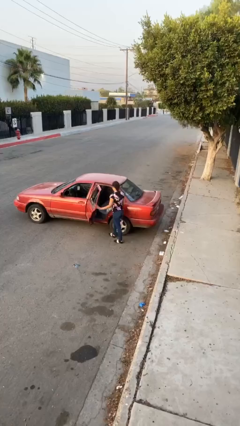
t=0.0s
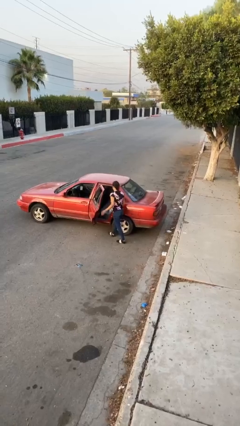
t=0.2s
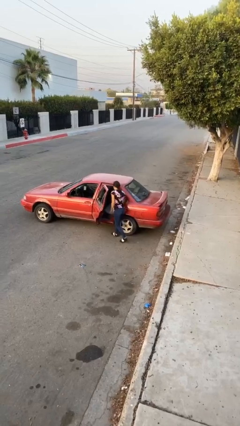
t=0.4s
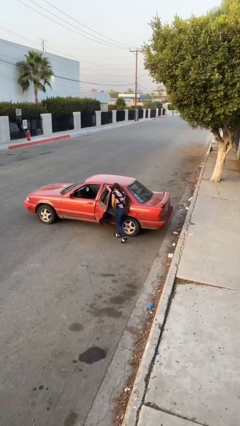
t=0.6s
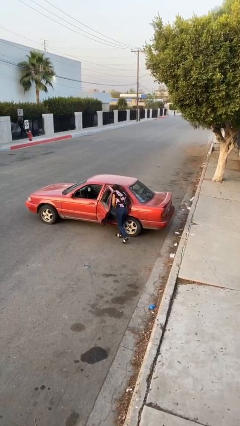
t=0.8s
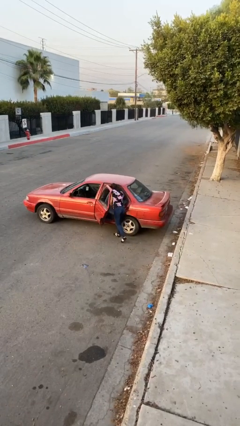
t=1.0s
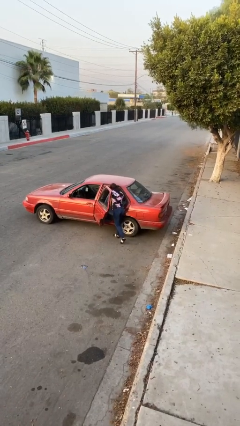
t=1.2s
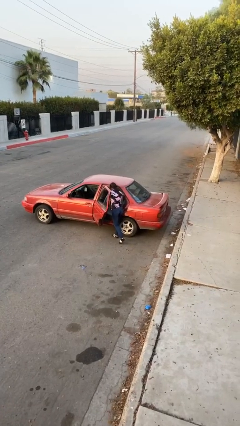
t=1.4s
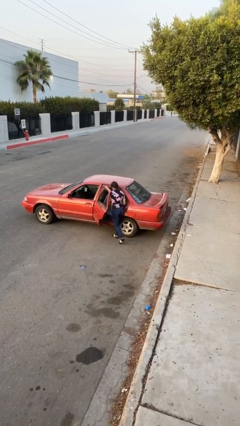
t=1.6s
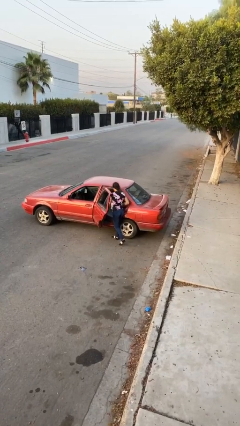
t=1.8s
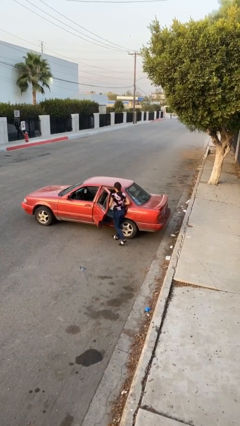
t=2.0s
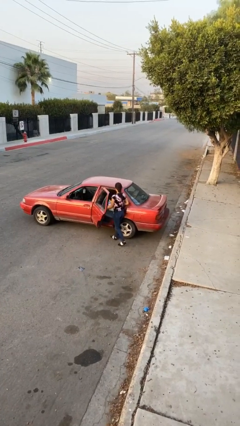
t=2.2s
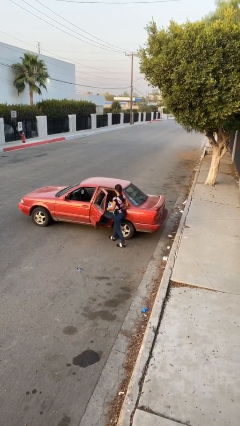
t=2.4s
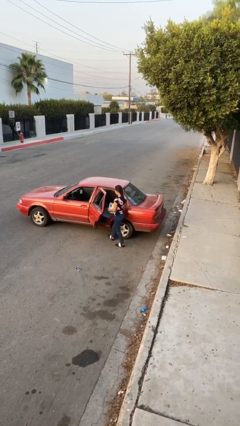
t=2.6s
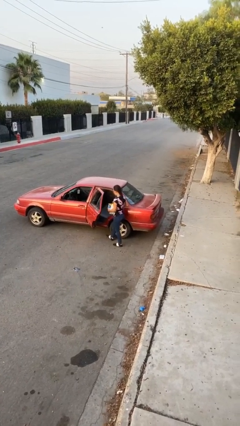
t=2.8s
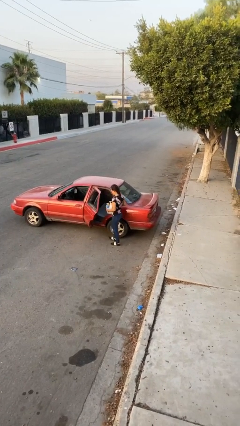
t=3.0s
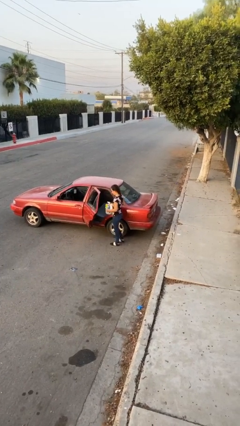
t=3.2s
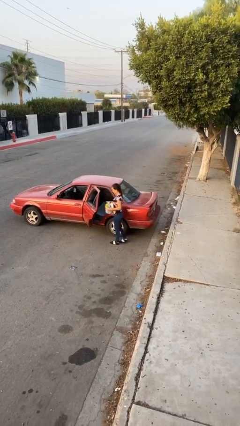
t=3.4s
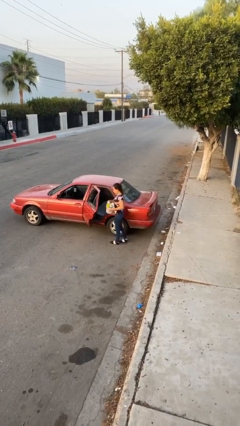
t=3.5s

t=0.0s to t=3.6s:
person unloads car

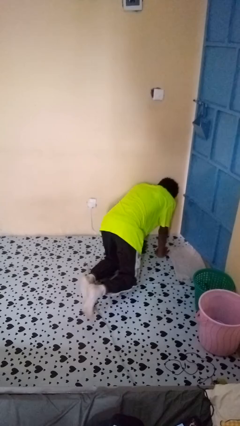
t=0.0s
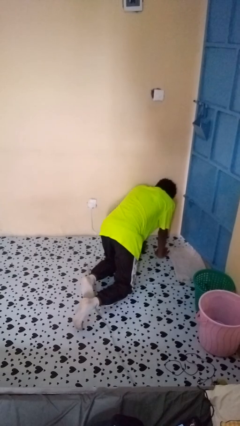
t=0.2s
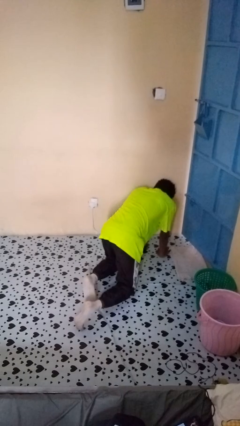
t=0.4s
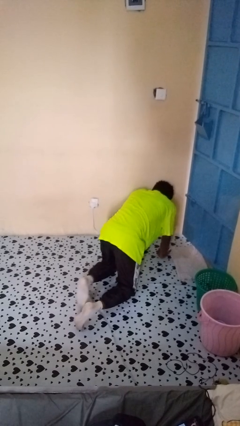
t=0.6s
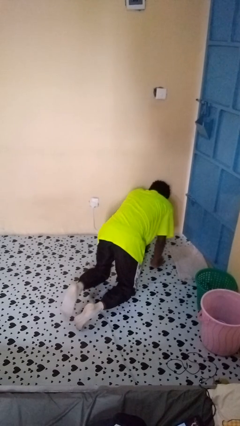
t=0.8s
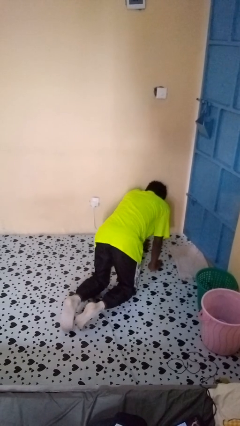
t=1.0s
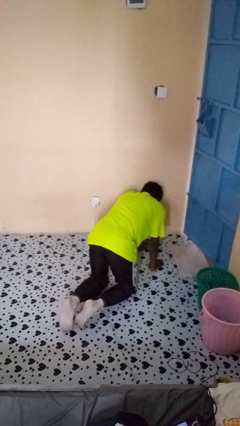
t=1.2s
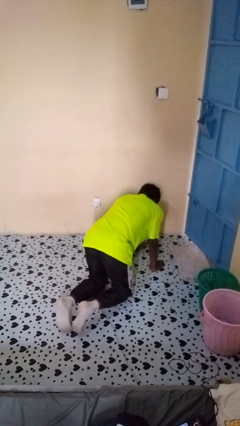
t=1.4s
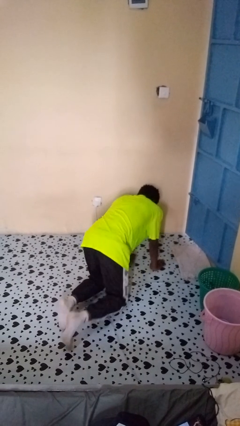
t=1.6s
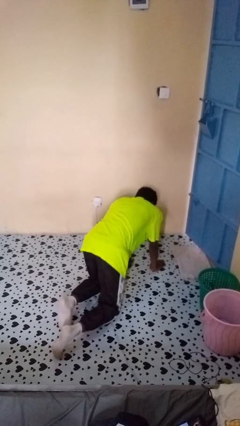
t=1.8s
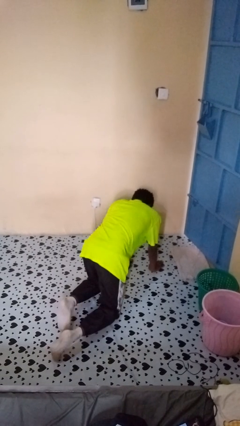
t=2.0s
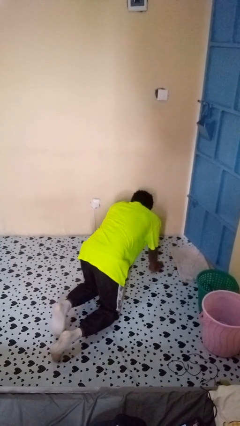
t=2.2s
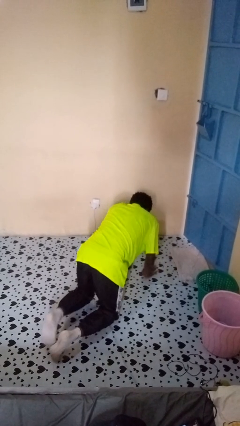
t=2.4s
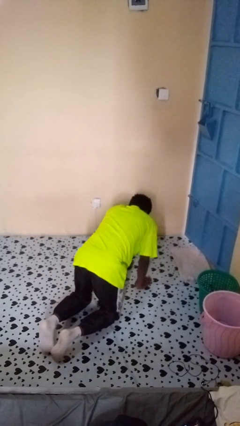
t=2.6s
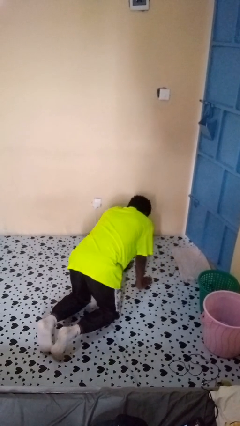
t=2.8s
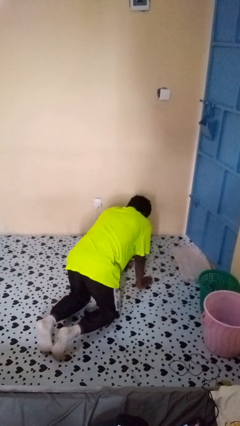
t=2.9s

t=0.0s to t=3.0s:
person crawls

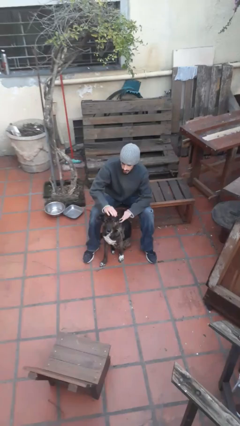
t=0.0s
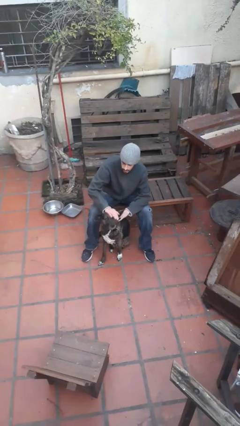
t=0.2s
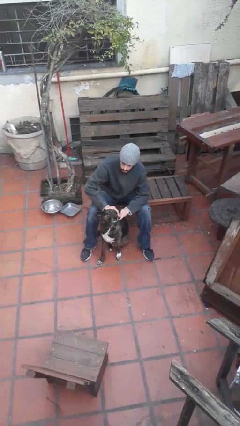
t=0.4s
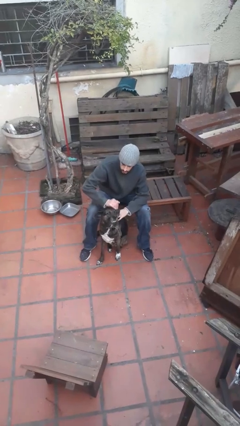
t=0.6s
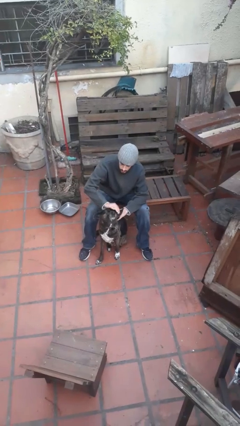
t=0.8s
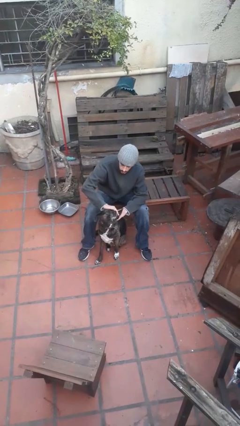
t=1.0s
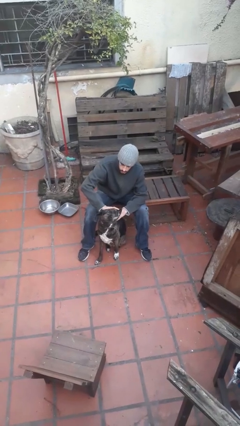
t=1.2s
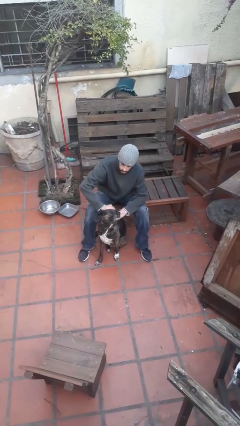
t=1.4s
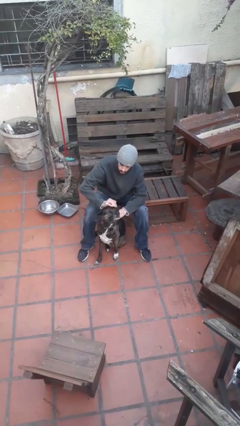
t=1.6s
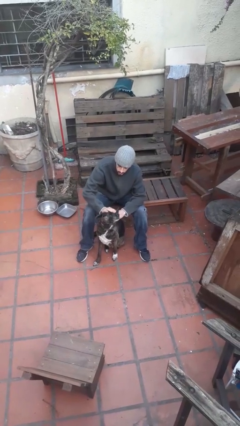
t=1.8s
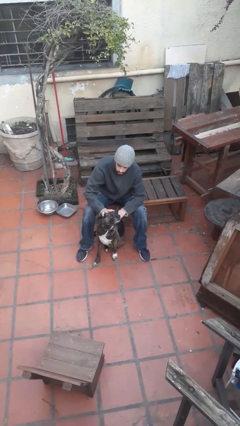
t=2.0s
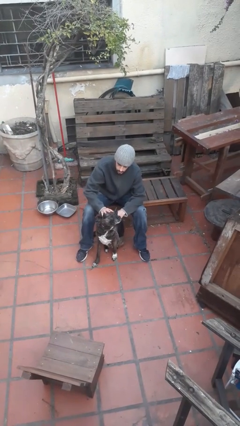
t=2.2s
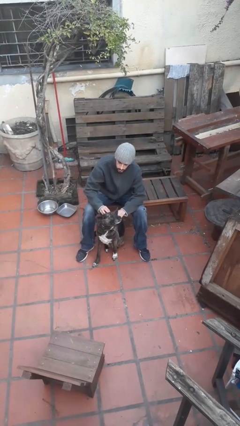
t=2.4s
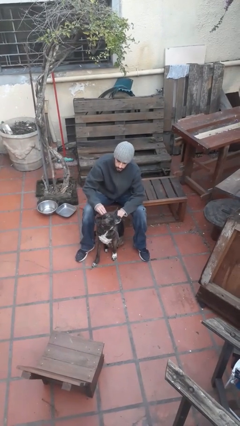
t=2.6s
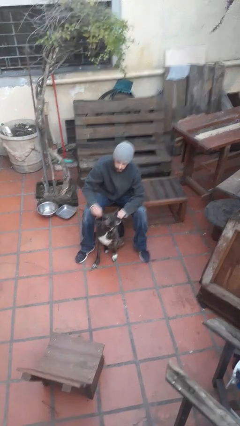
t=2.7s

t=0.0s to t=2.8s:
person pets dog

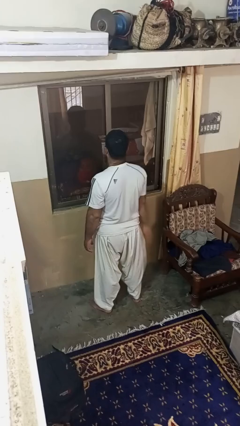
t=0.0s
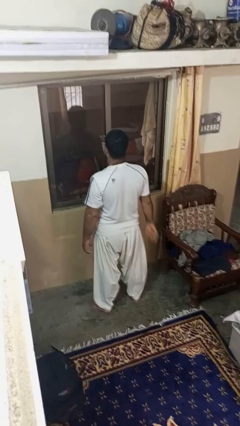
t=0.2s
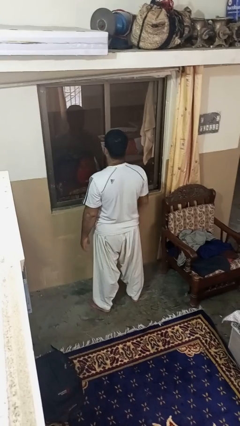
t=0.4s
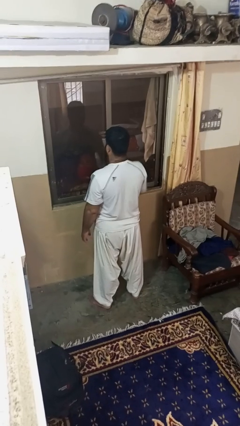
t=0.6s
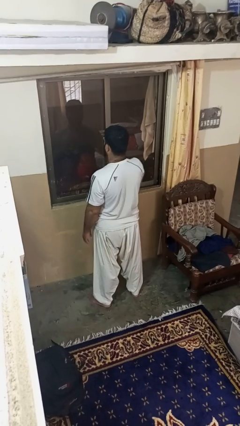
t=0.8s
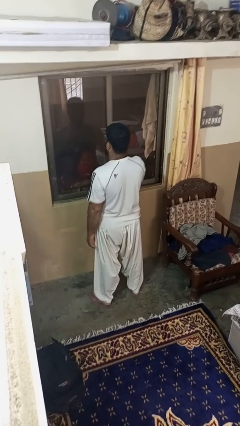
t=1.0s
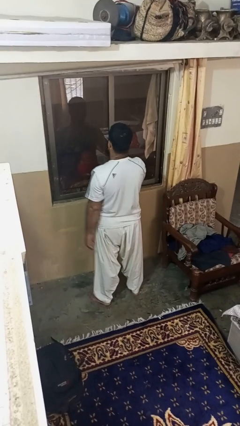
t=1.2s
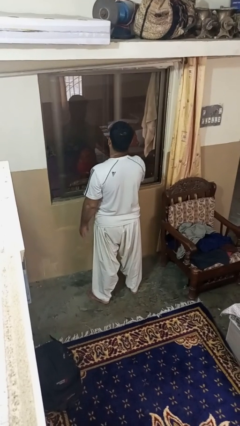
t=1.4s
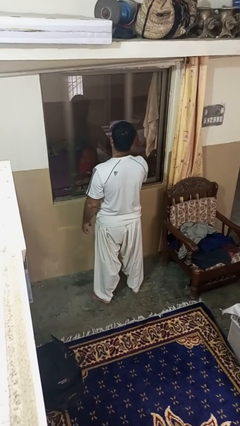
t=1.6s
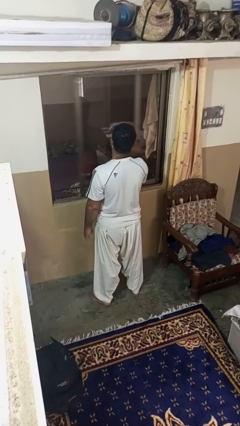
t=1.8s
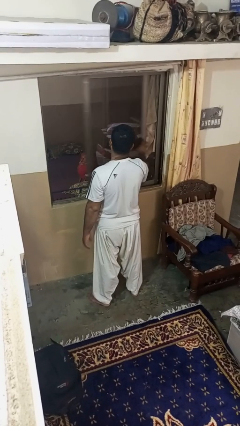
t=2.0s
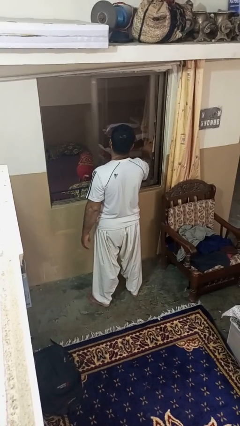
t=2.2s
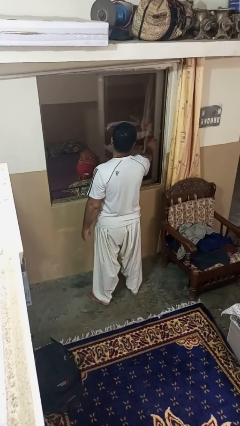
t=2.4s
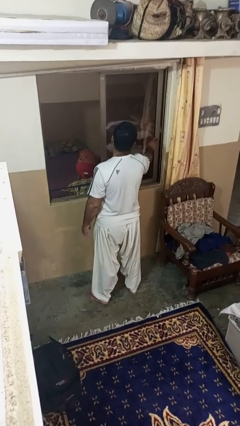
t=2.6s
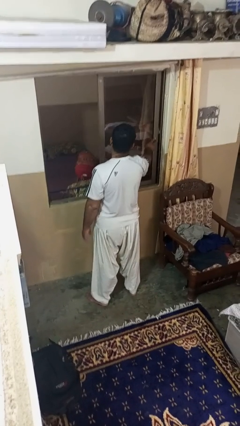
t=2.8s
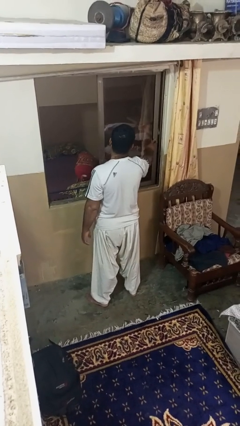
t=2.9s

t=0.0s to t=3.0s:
person opens home window

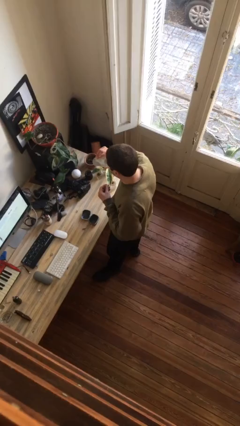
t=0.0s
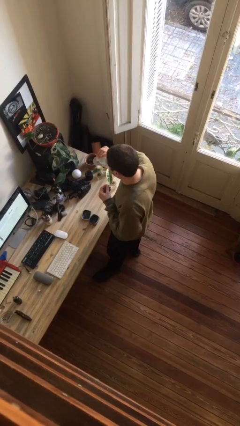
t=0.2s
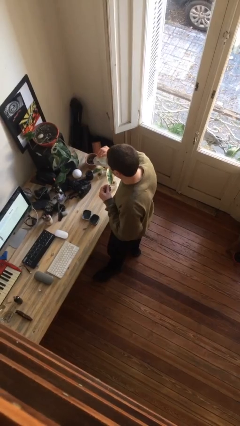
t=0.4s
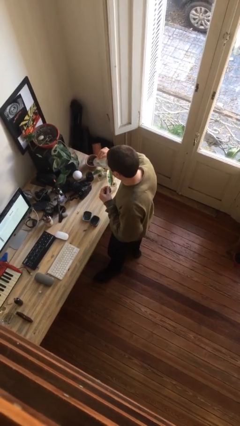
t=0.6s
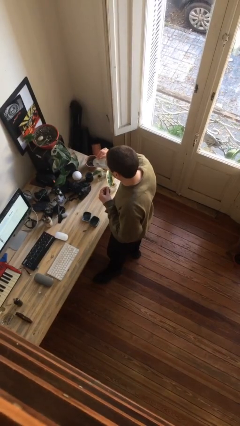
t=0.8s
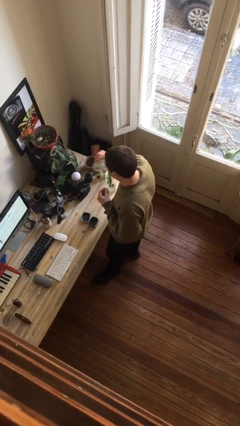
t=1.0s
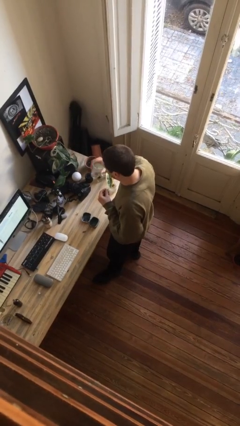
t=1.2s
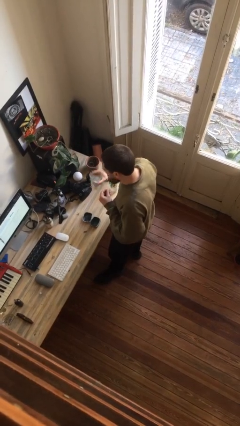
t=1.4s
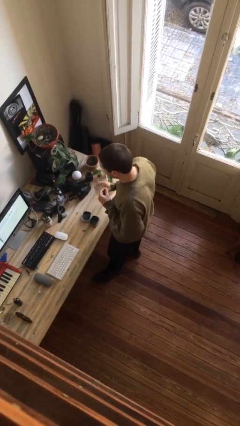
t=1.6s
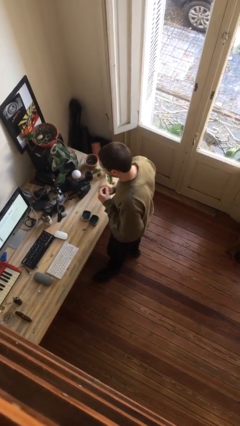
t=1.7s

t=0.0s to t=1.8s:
person drinks from cup

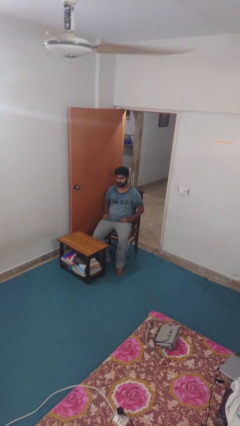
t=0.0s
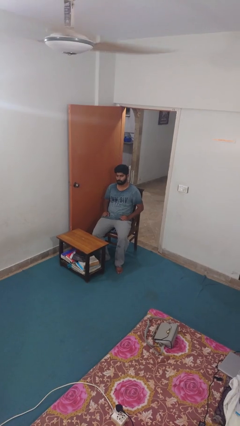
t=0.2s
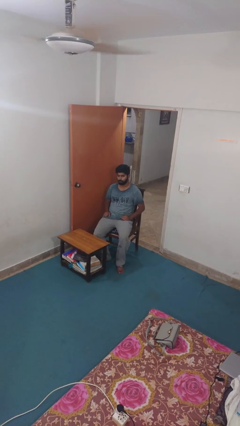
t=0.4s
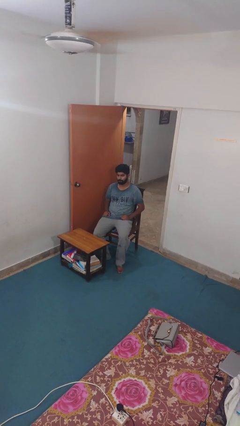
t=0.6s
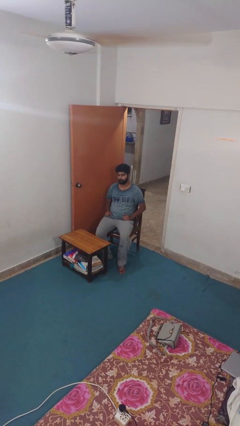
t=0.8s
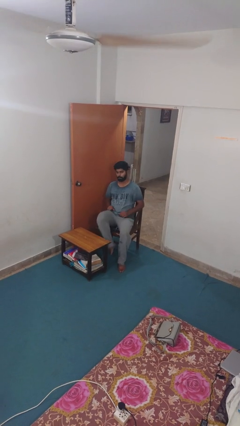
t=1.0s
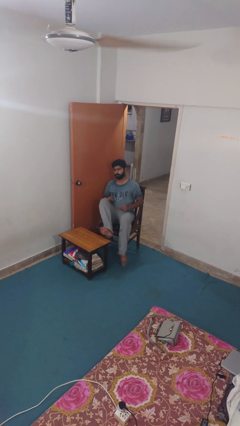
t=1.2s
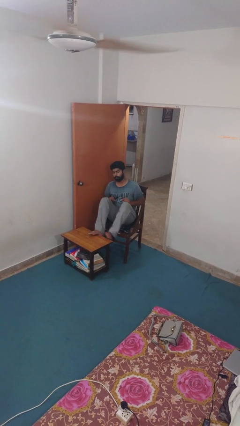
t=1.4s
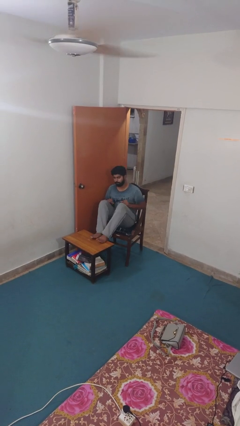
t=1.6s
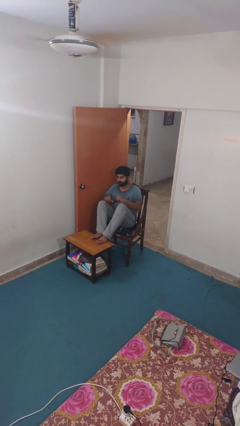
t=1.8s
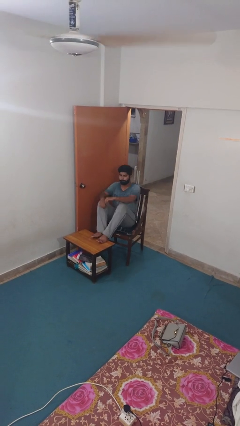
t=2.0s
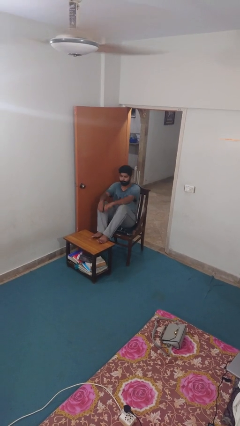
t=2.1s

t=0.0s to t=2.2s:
person puts feet up

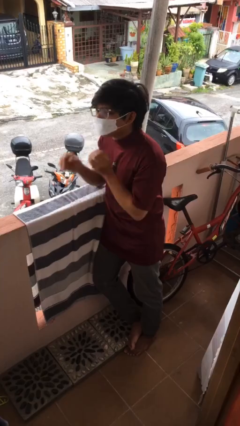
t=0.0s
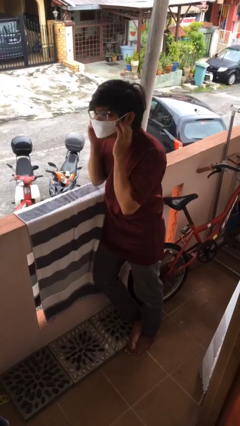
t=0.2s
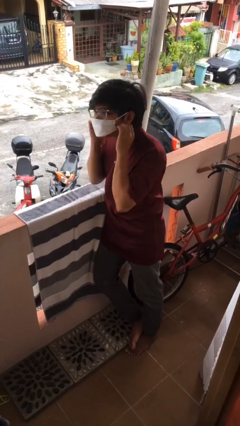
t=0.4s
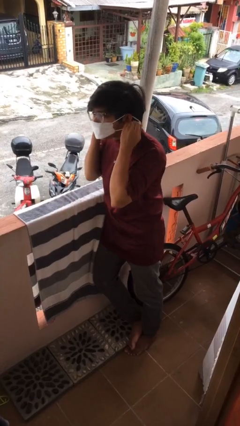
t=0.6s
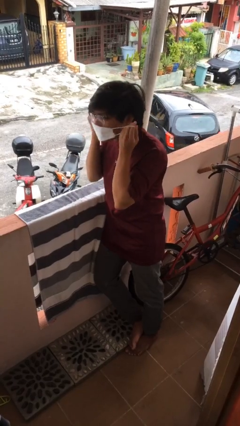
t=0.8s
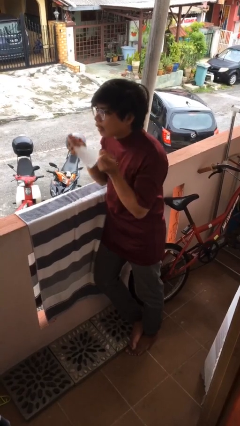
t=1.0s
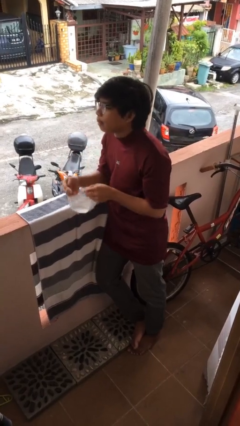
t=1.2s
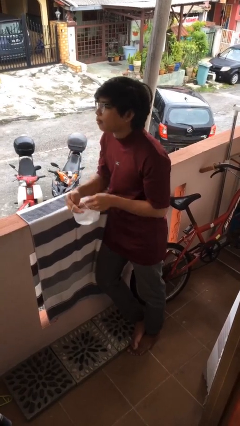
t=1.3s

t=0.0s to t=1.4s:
person takes off facemask
